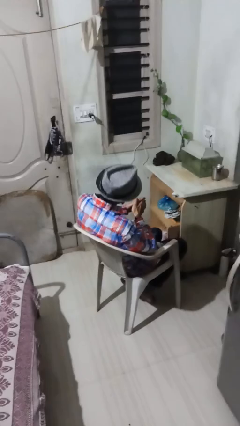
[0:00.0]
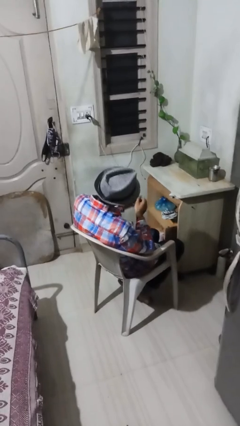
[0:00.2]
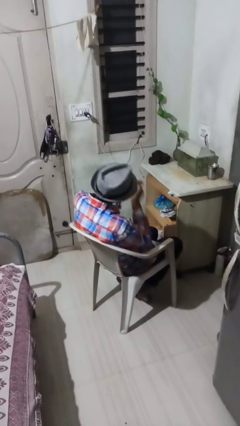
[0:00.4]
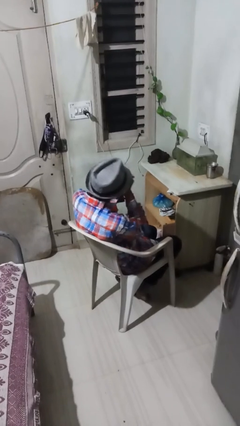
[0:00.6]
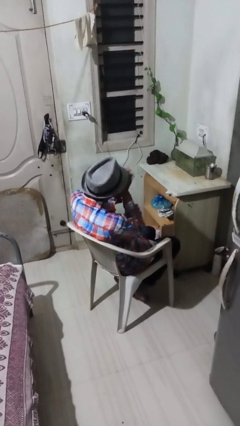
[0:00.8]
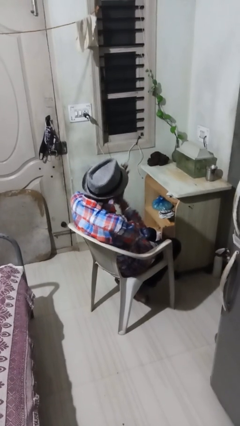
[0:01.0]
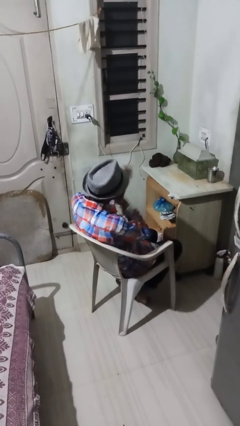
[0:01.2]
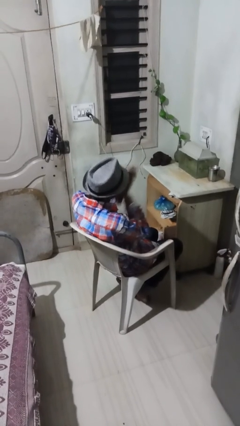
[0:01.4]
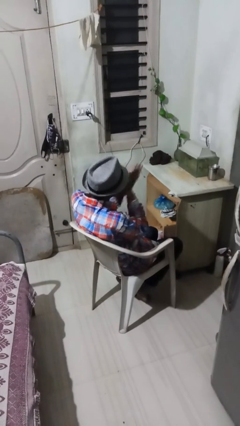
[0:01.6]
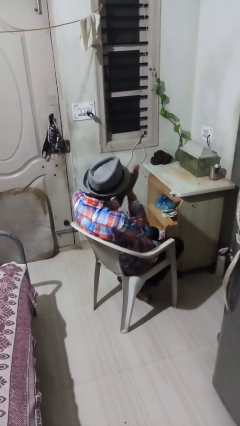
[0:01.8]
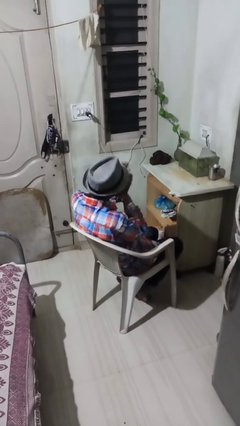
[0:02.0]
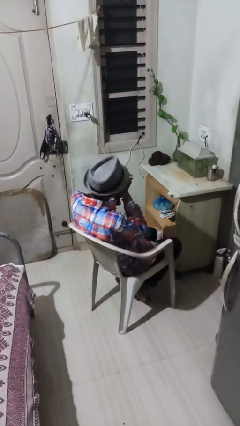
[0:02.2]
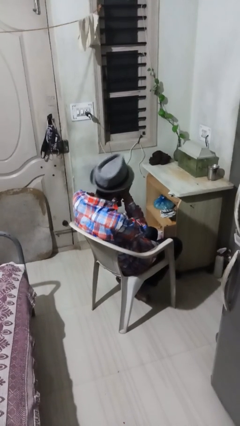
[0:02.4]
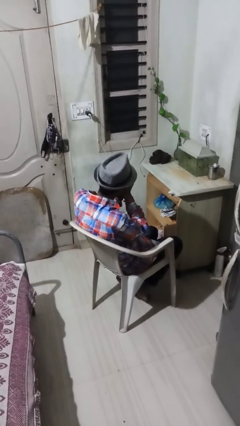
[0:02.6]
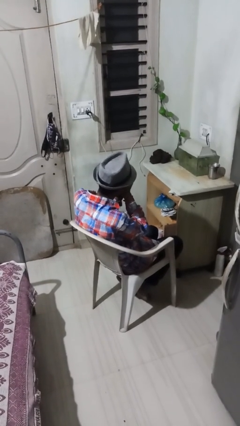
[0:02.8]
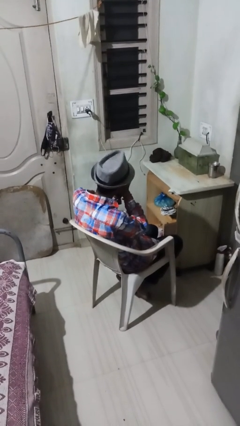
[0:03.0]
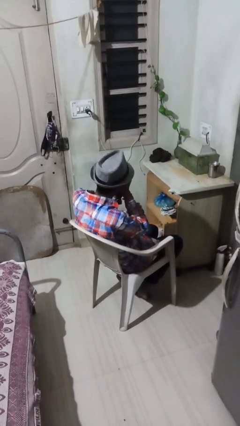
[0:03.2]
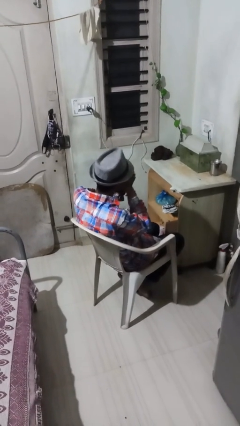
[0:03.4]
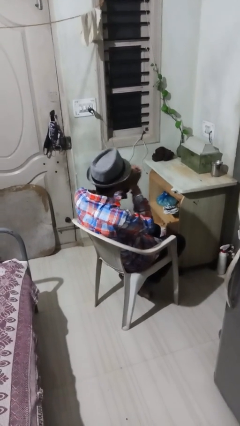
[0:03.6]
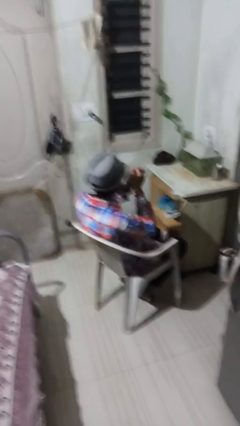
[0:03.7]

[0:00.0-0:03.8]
person blows into hands

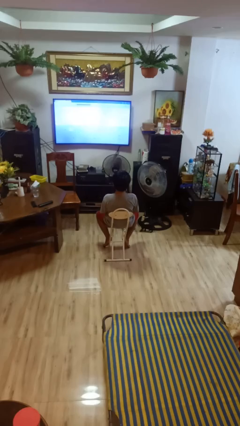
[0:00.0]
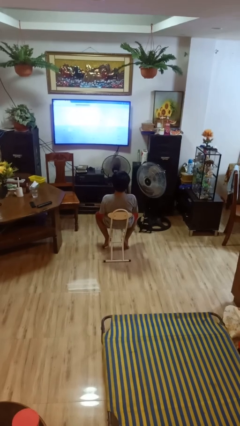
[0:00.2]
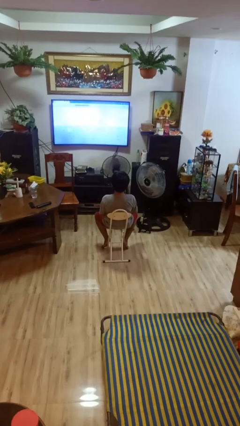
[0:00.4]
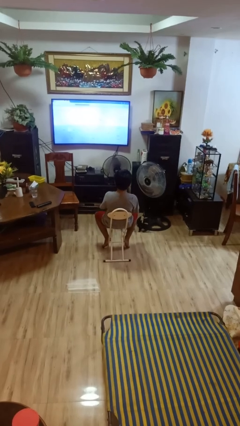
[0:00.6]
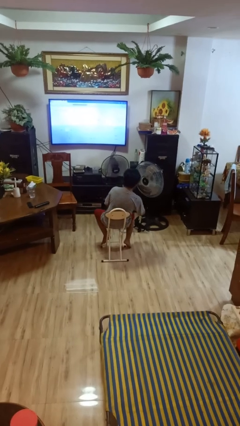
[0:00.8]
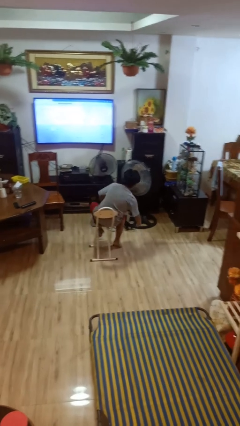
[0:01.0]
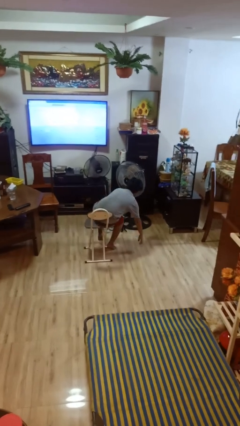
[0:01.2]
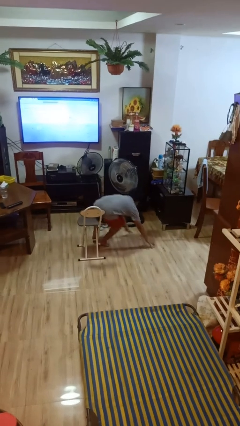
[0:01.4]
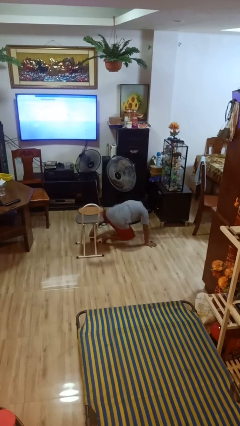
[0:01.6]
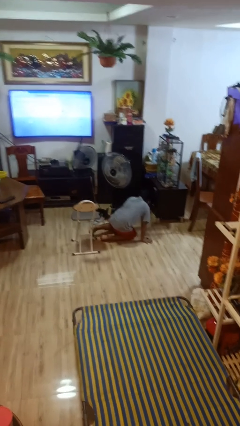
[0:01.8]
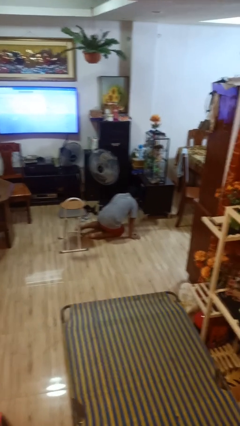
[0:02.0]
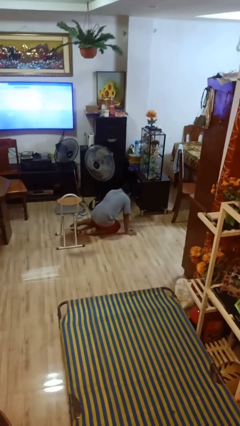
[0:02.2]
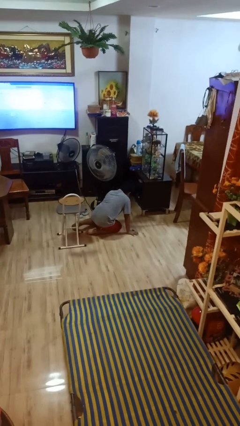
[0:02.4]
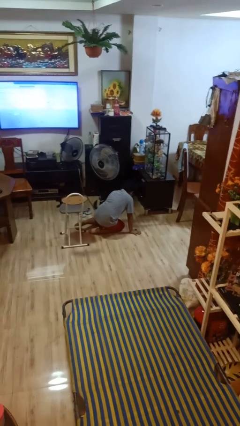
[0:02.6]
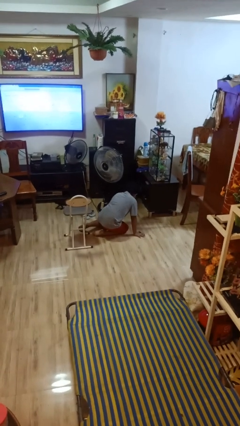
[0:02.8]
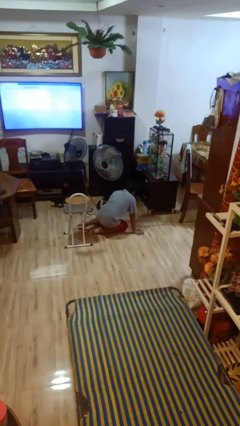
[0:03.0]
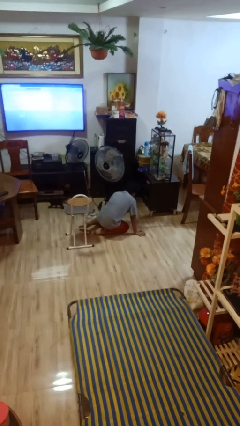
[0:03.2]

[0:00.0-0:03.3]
person falls from chair

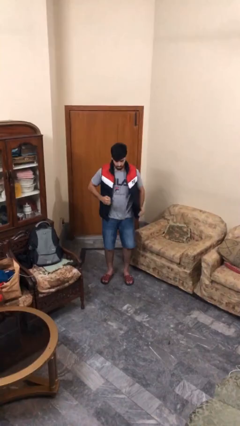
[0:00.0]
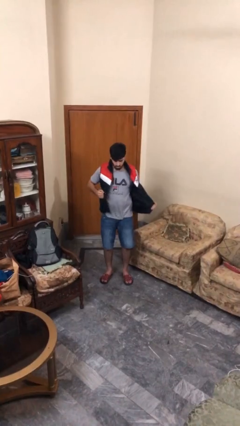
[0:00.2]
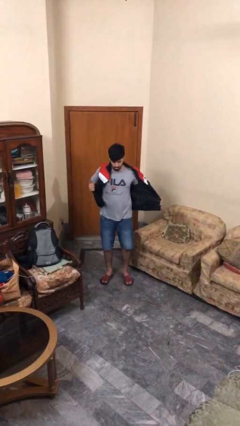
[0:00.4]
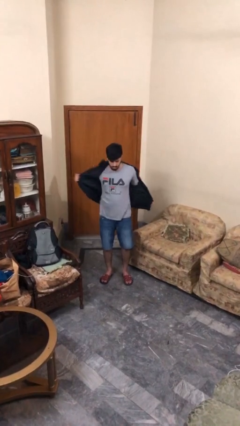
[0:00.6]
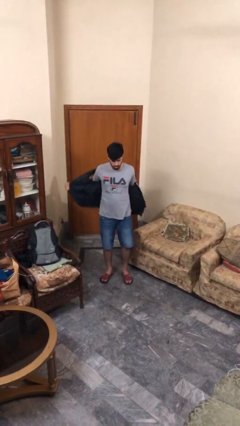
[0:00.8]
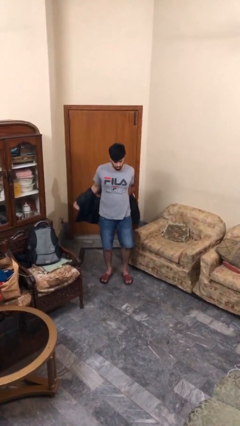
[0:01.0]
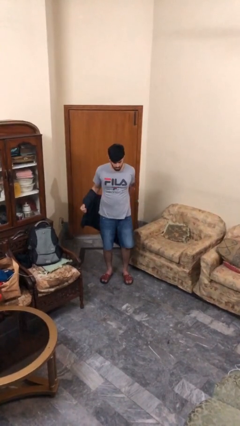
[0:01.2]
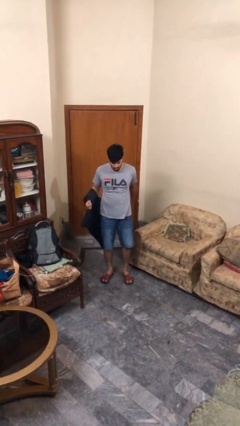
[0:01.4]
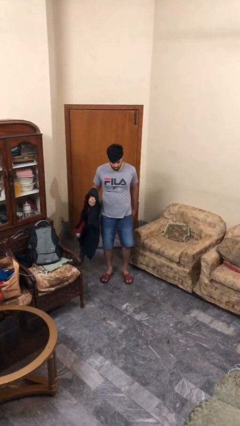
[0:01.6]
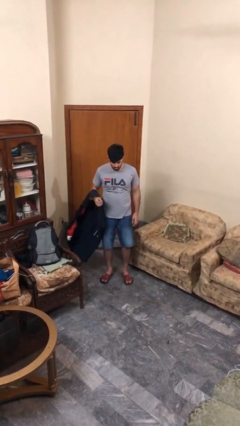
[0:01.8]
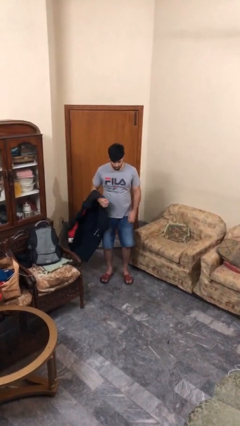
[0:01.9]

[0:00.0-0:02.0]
person takes off jacket

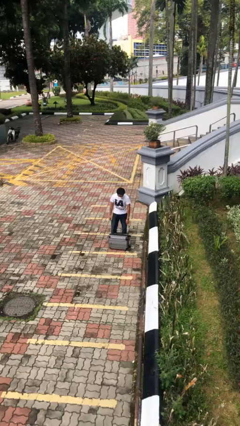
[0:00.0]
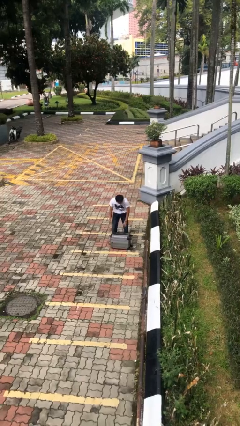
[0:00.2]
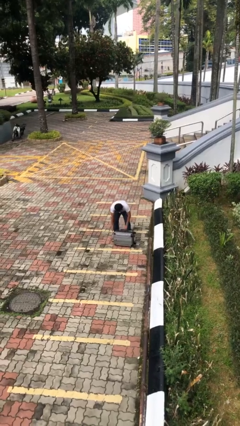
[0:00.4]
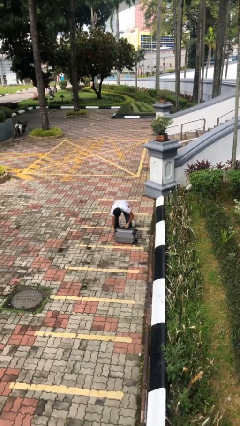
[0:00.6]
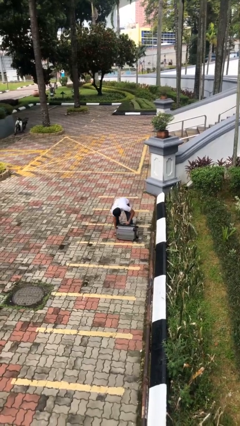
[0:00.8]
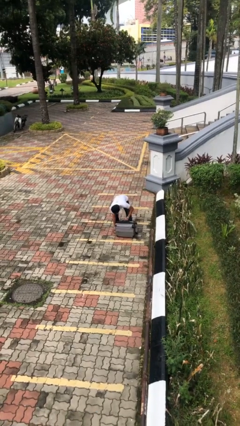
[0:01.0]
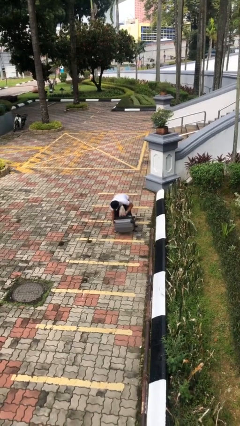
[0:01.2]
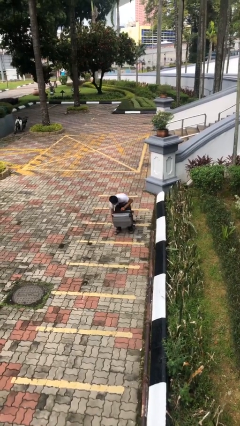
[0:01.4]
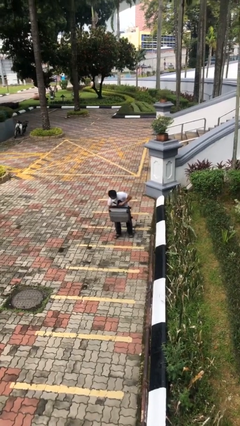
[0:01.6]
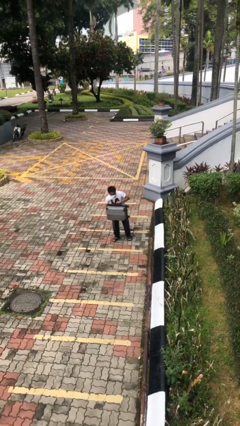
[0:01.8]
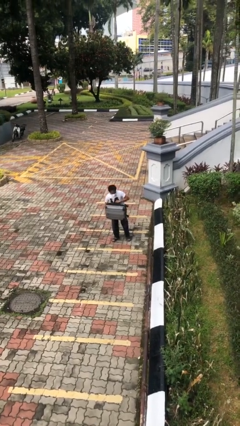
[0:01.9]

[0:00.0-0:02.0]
person picks up object from floor

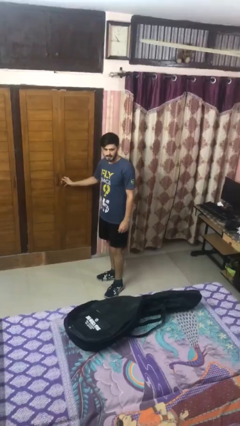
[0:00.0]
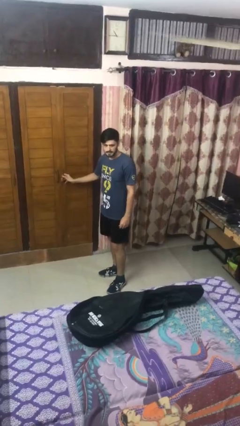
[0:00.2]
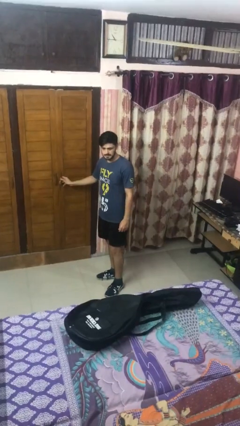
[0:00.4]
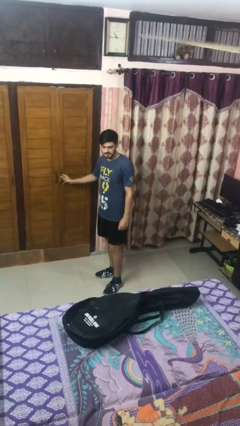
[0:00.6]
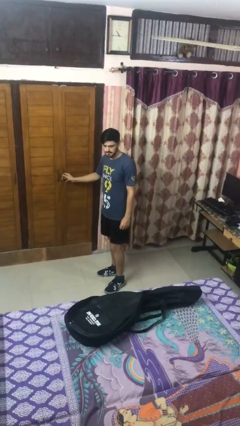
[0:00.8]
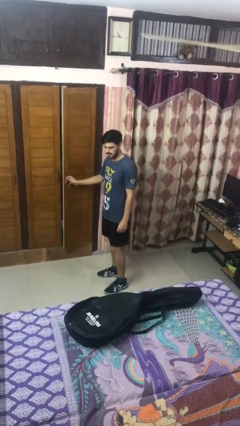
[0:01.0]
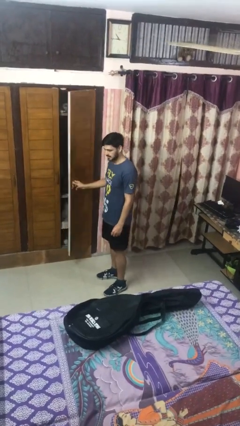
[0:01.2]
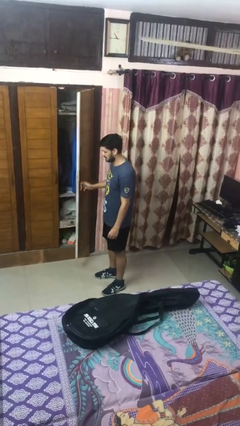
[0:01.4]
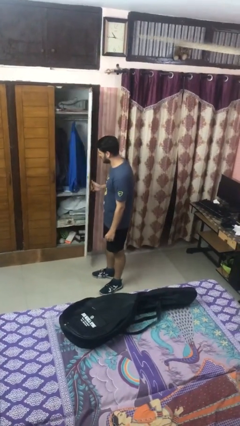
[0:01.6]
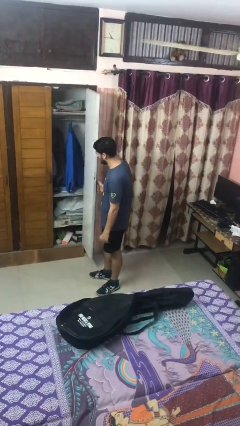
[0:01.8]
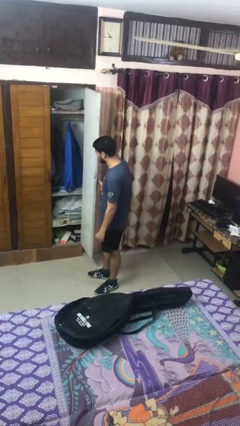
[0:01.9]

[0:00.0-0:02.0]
person opens closet door

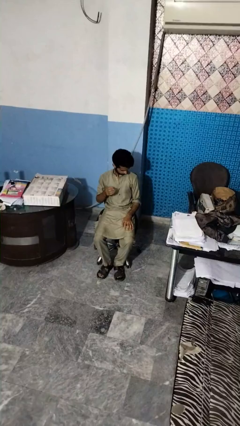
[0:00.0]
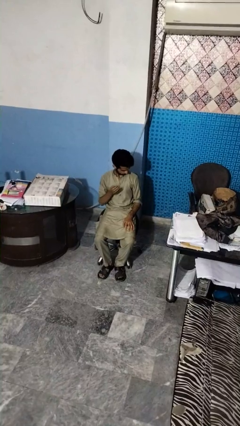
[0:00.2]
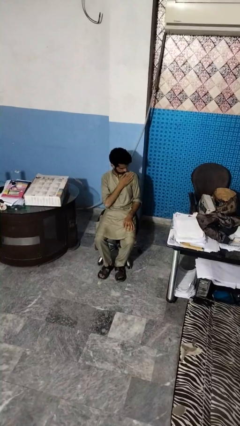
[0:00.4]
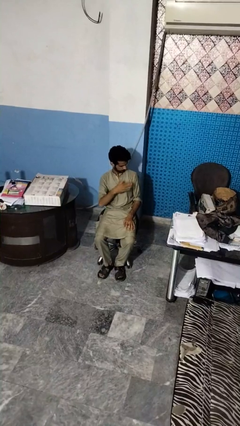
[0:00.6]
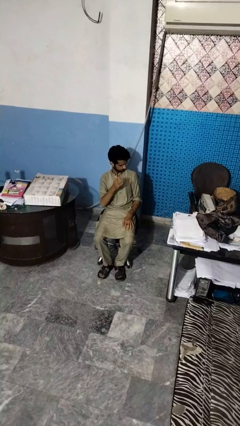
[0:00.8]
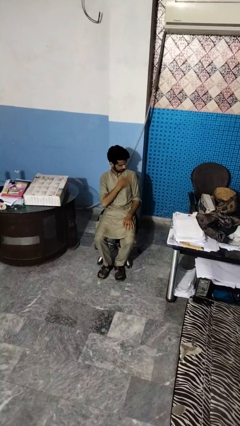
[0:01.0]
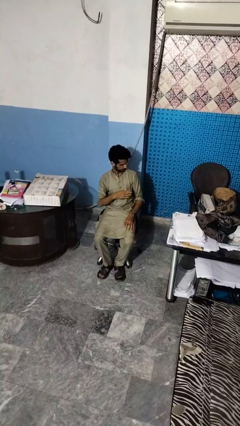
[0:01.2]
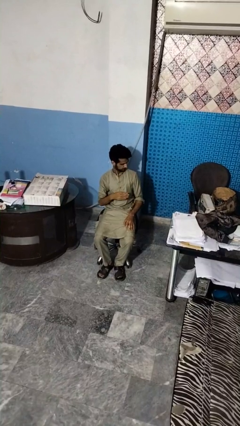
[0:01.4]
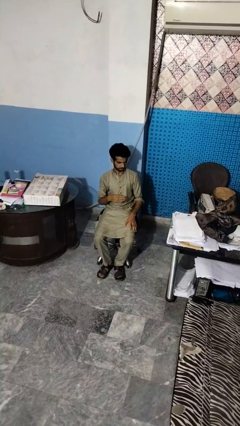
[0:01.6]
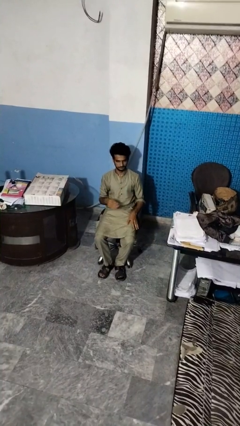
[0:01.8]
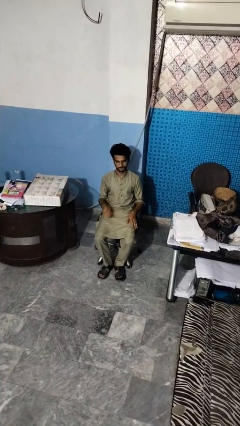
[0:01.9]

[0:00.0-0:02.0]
person swats bug

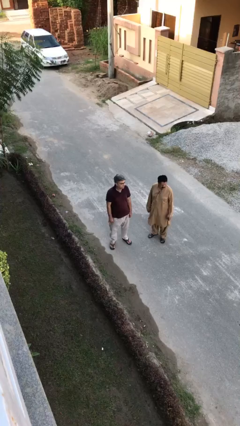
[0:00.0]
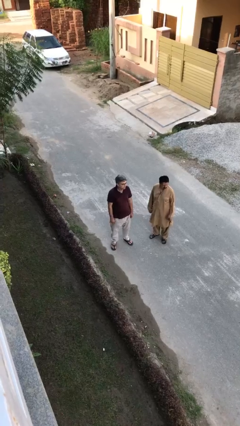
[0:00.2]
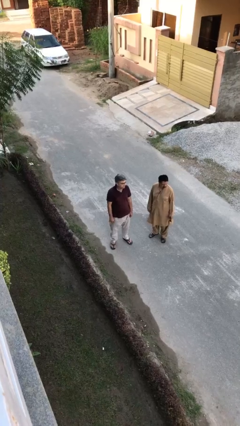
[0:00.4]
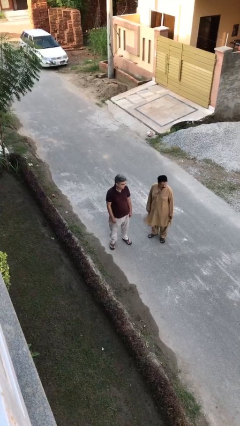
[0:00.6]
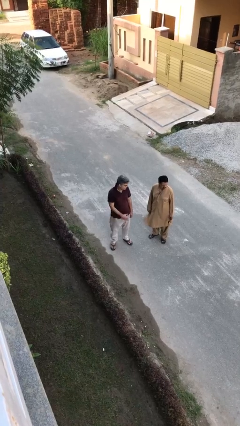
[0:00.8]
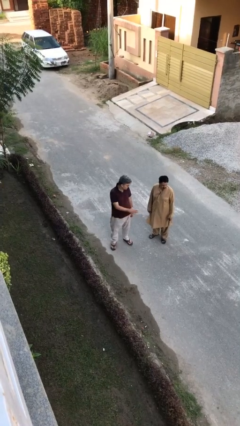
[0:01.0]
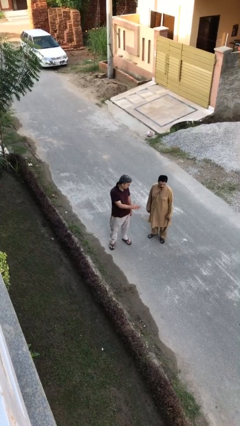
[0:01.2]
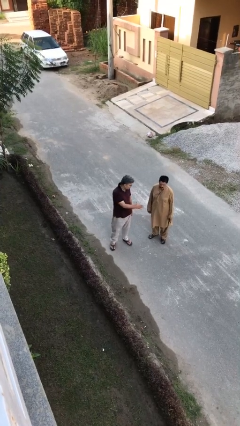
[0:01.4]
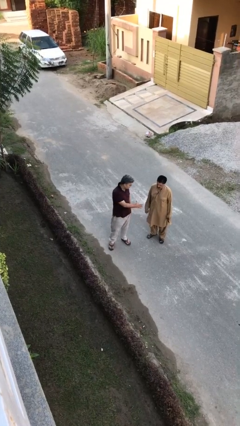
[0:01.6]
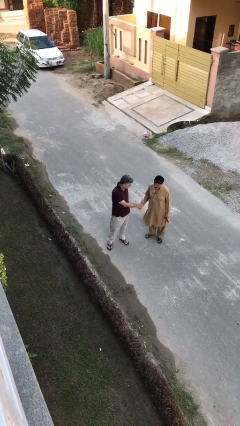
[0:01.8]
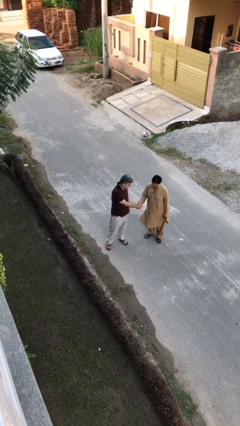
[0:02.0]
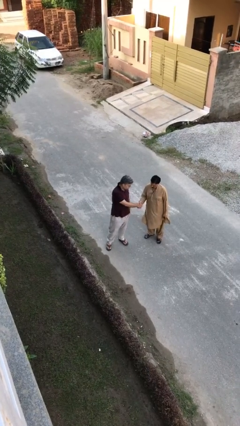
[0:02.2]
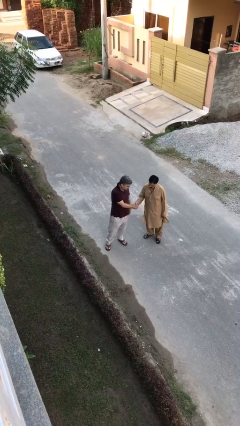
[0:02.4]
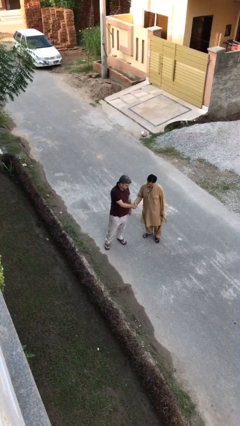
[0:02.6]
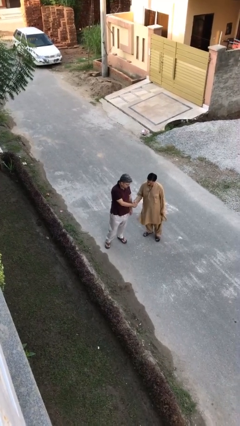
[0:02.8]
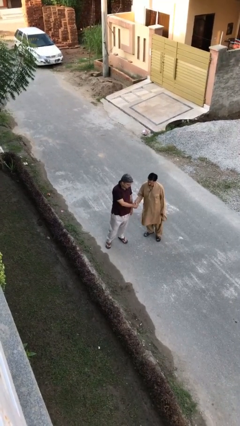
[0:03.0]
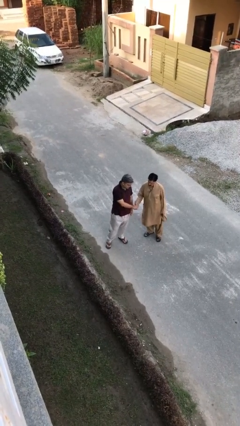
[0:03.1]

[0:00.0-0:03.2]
person shakes hand
